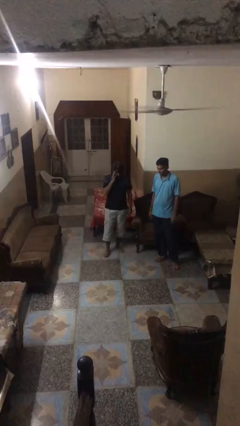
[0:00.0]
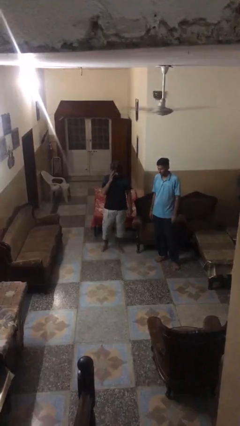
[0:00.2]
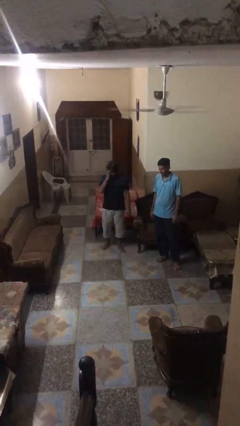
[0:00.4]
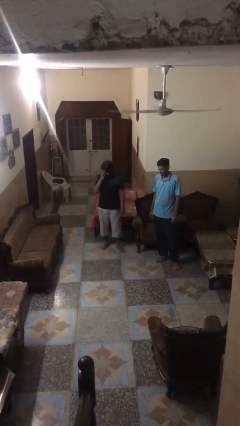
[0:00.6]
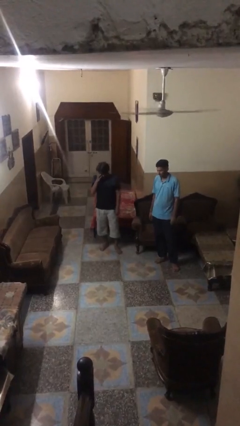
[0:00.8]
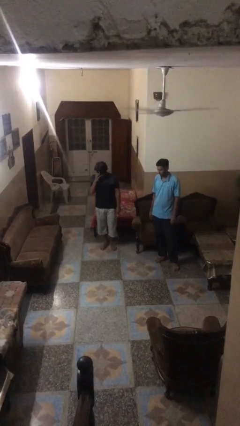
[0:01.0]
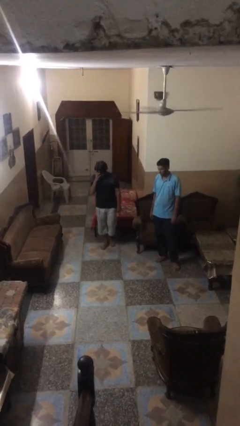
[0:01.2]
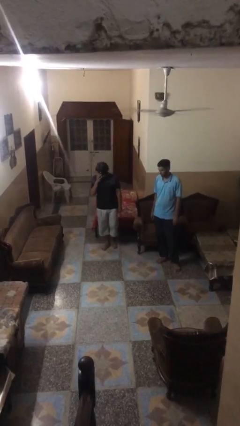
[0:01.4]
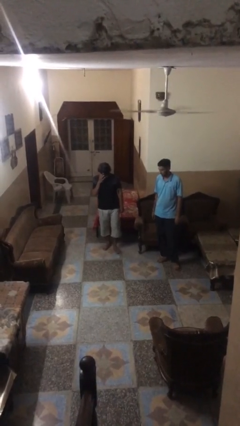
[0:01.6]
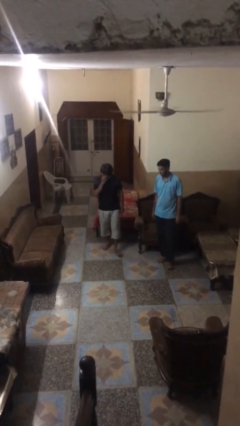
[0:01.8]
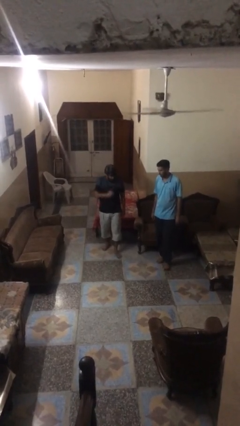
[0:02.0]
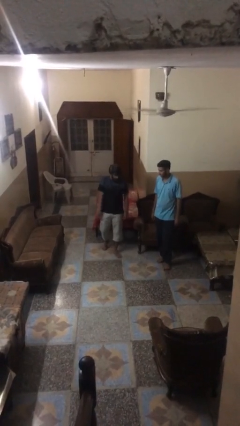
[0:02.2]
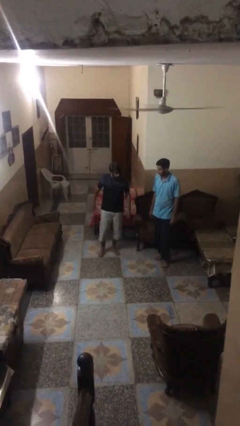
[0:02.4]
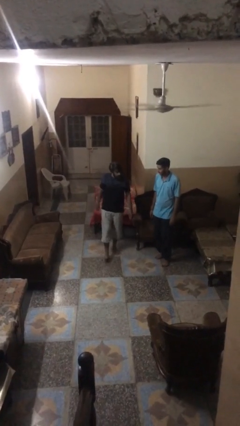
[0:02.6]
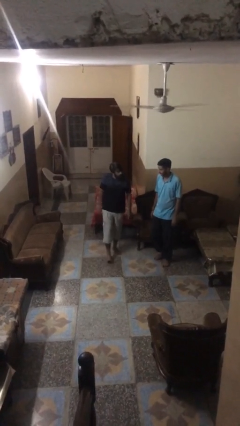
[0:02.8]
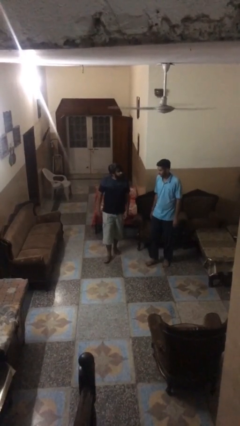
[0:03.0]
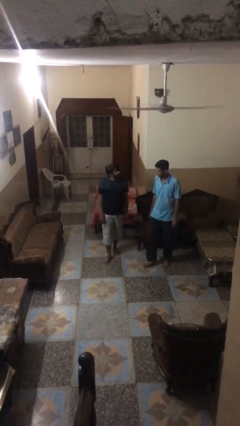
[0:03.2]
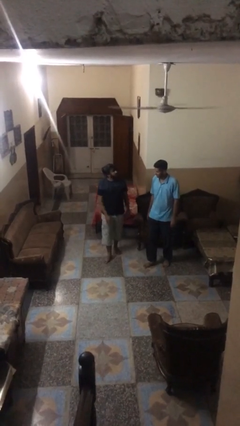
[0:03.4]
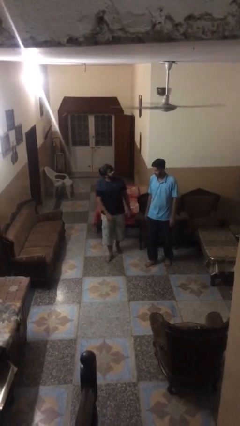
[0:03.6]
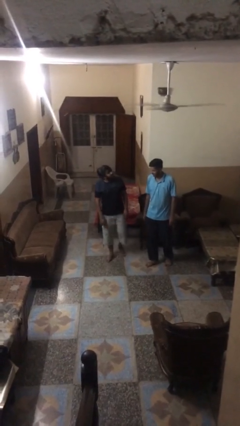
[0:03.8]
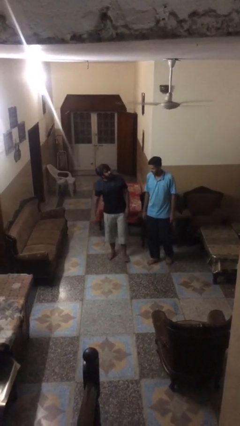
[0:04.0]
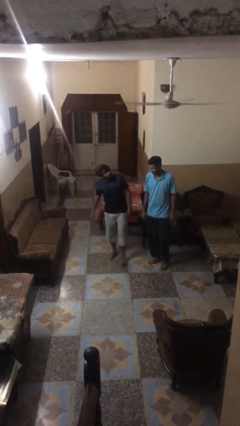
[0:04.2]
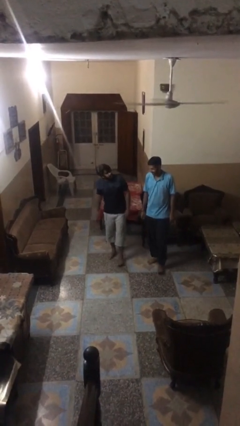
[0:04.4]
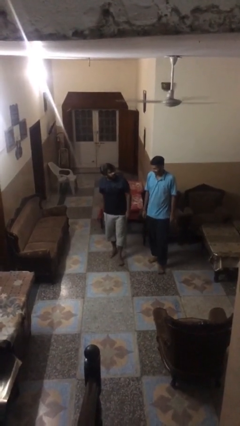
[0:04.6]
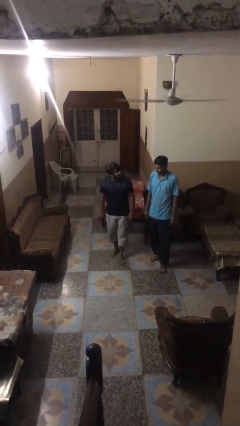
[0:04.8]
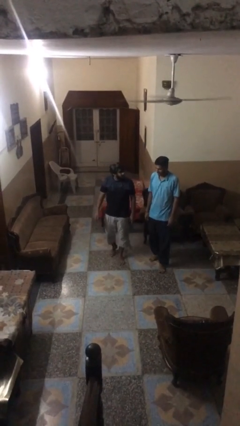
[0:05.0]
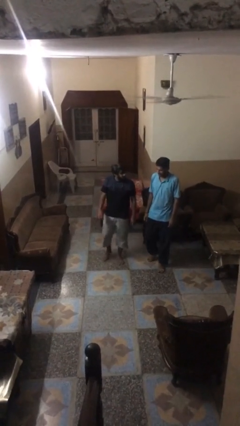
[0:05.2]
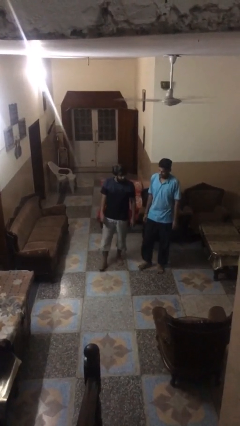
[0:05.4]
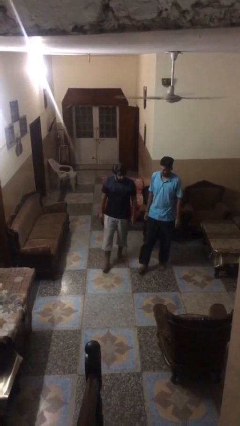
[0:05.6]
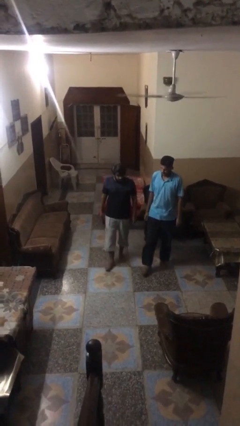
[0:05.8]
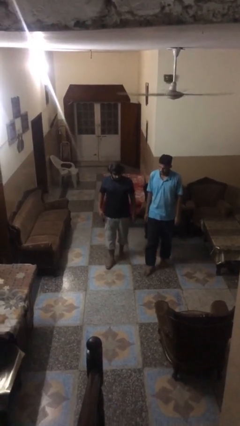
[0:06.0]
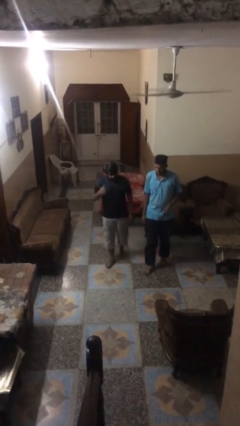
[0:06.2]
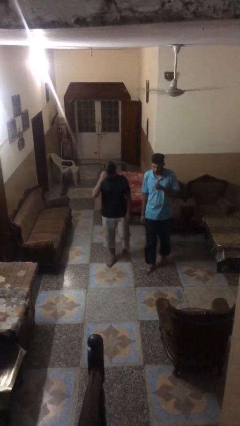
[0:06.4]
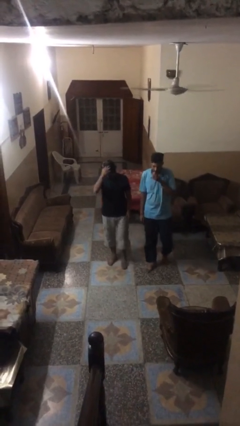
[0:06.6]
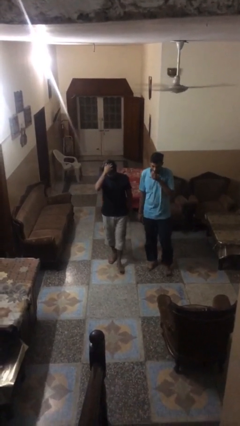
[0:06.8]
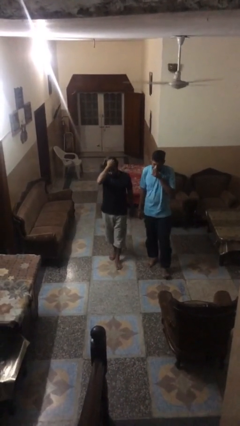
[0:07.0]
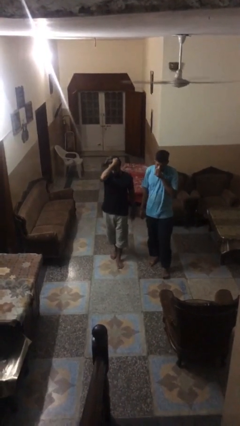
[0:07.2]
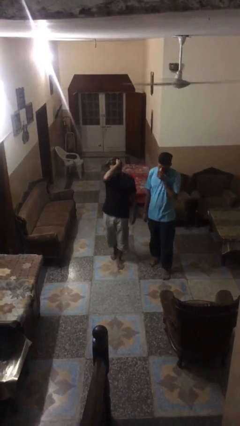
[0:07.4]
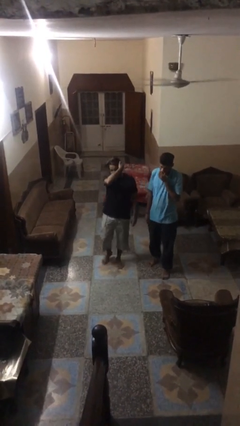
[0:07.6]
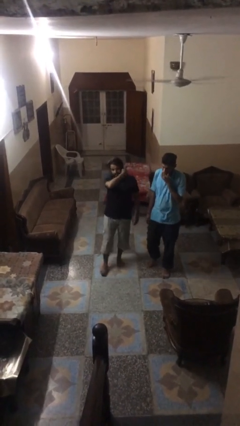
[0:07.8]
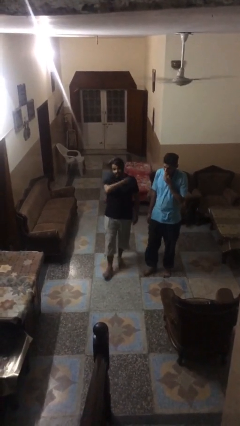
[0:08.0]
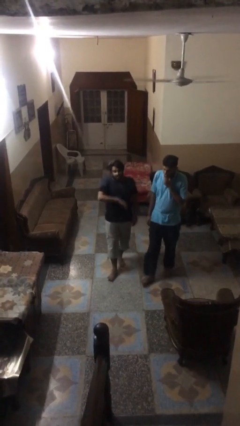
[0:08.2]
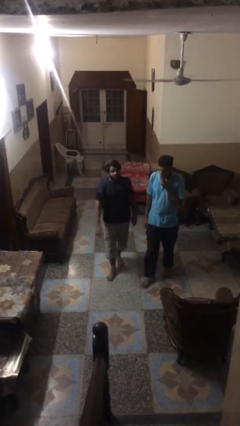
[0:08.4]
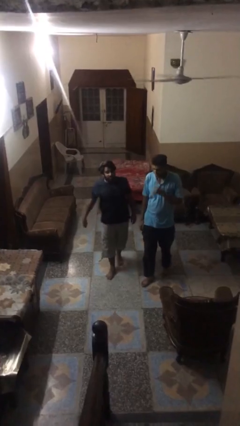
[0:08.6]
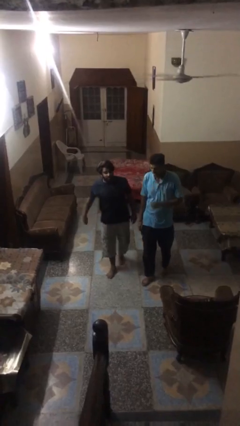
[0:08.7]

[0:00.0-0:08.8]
person talks to person

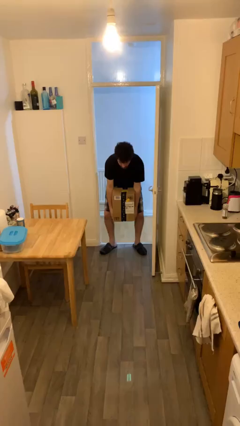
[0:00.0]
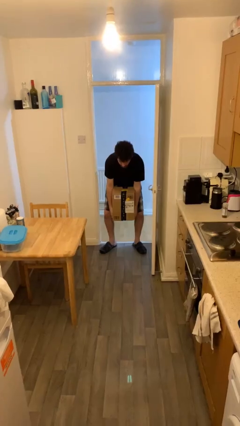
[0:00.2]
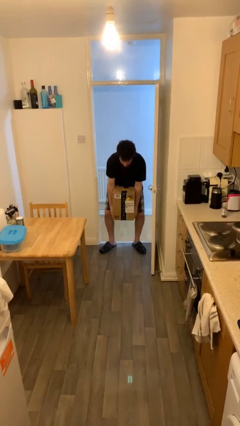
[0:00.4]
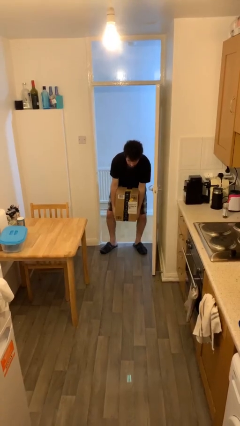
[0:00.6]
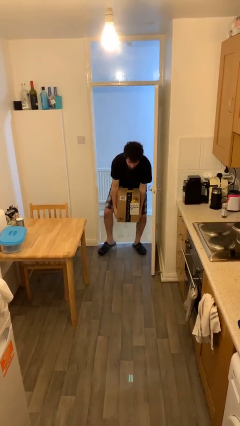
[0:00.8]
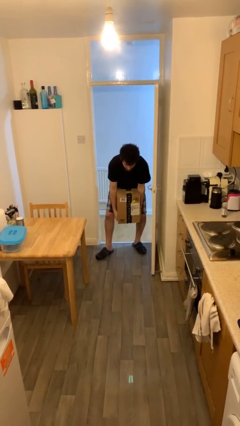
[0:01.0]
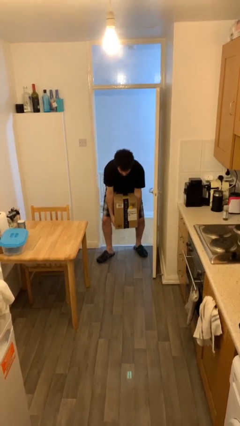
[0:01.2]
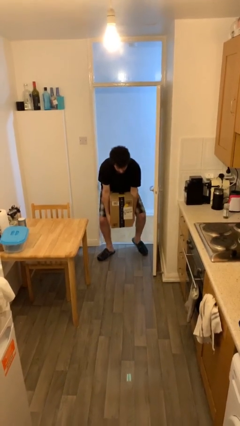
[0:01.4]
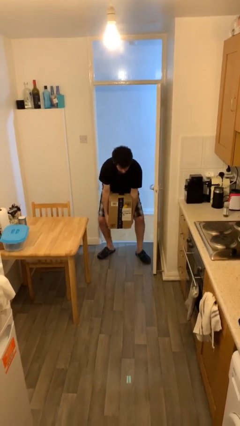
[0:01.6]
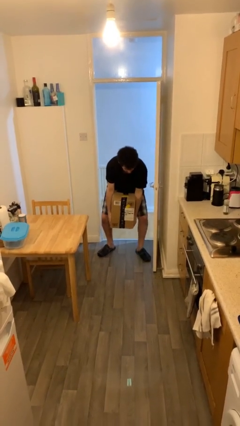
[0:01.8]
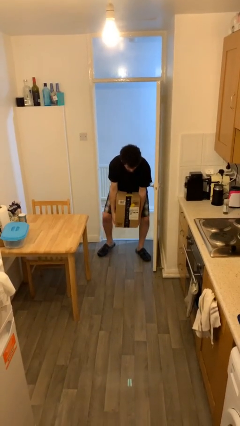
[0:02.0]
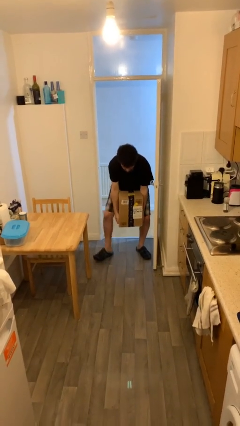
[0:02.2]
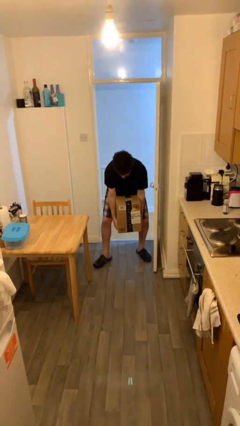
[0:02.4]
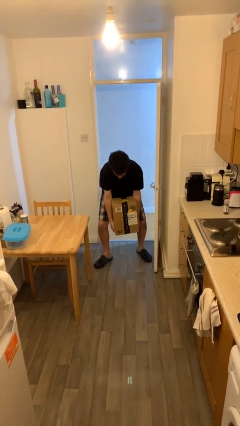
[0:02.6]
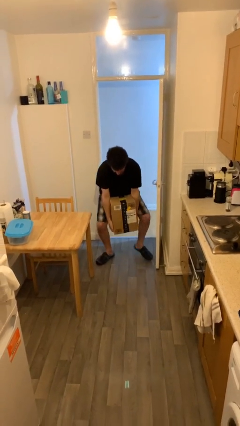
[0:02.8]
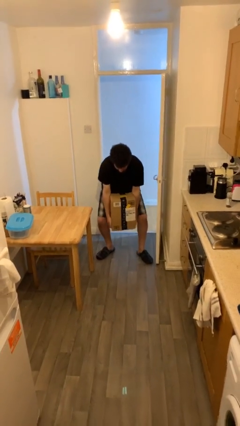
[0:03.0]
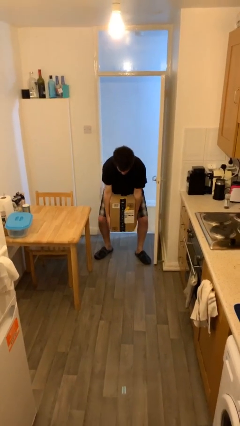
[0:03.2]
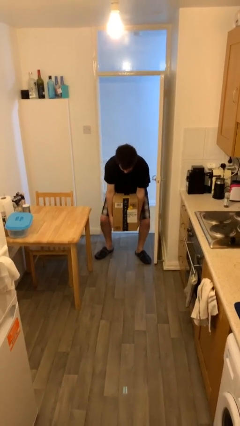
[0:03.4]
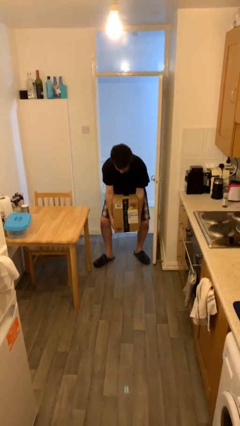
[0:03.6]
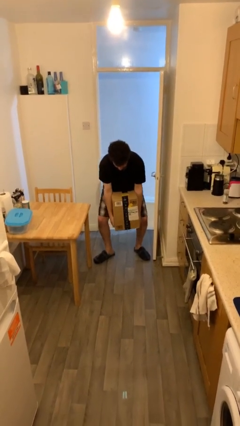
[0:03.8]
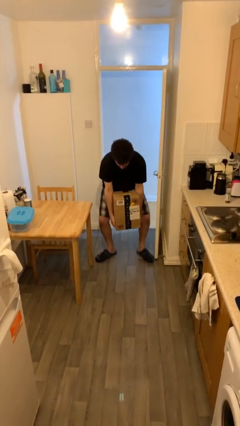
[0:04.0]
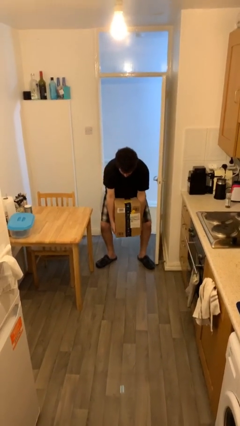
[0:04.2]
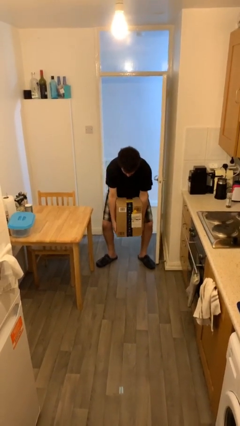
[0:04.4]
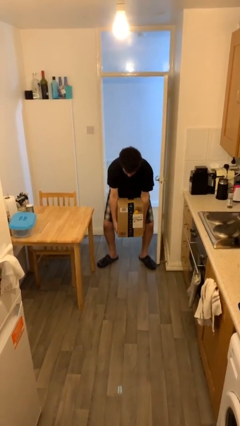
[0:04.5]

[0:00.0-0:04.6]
person carries heavy object

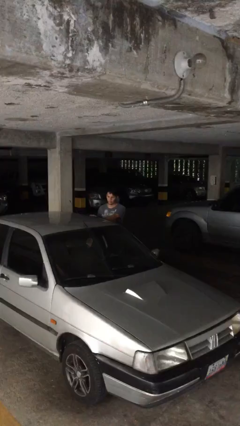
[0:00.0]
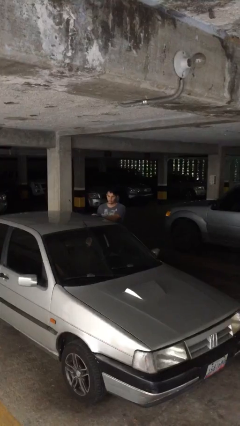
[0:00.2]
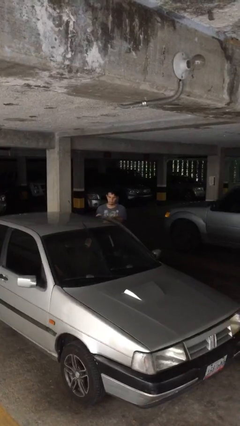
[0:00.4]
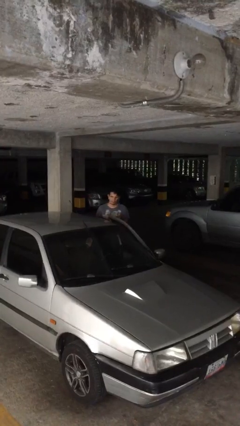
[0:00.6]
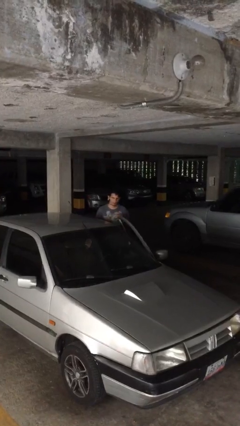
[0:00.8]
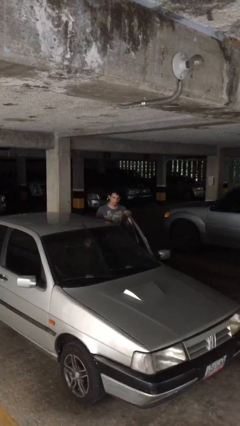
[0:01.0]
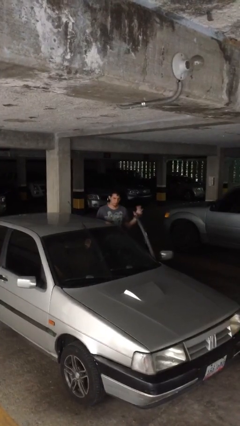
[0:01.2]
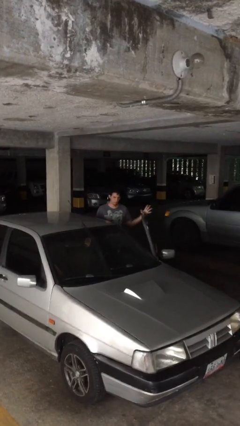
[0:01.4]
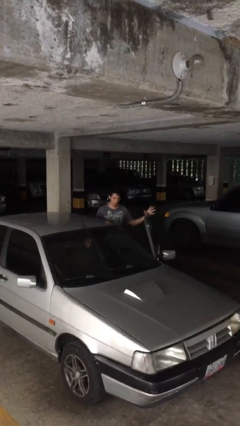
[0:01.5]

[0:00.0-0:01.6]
person opens car door

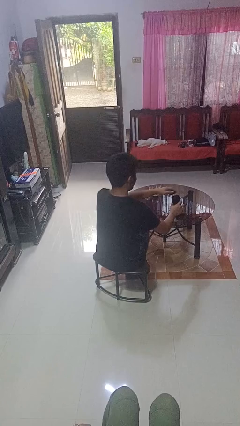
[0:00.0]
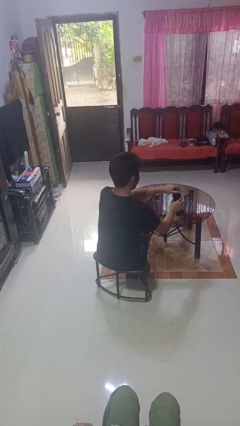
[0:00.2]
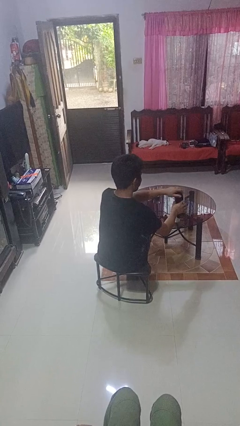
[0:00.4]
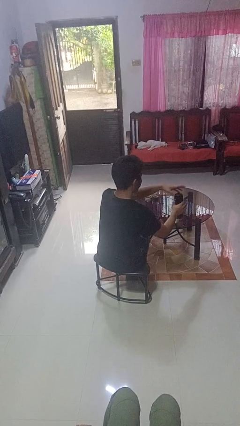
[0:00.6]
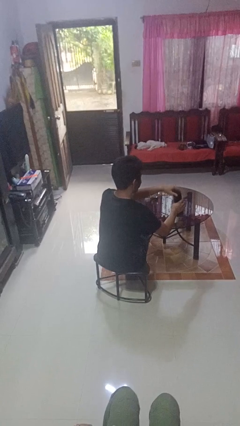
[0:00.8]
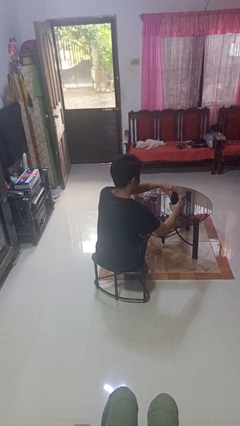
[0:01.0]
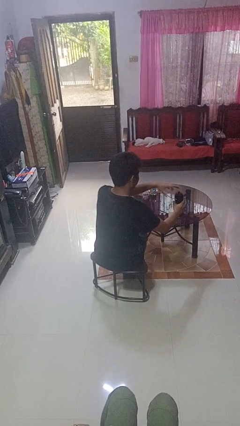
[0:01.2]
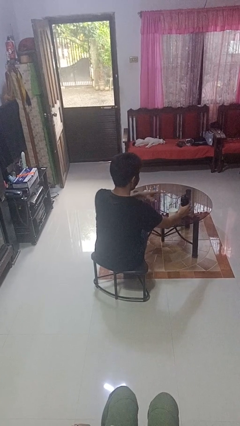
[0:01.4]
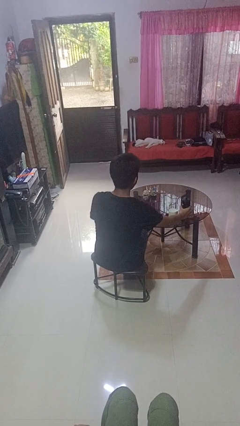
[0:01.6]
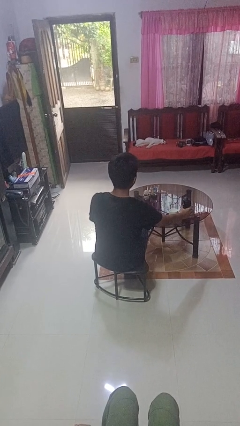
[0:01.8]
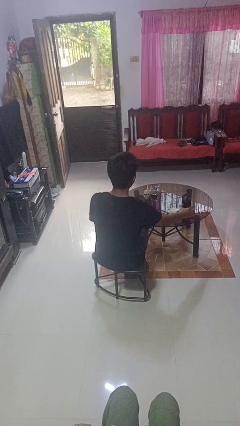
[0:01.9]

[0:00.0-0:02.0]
person screws lid to bottle

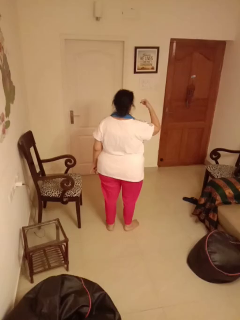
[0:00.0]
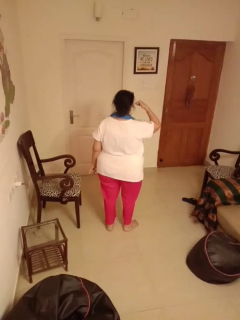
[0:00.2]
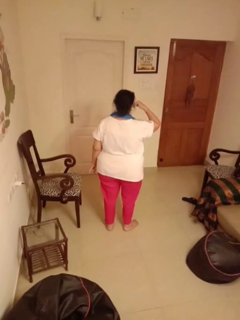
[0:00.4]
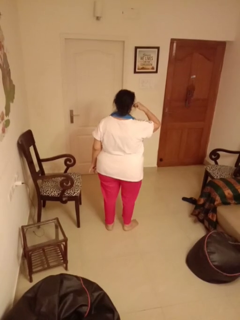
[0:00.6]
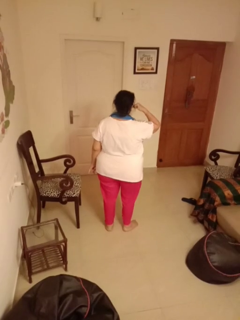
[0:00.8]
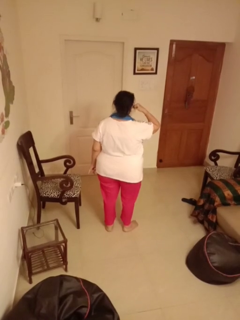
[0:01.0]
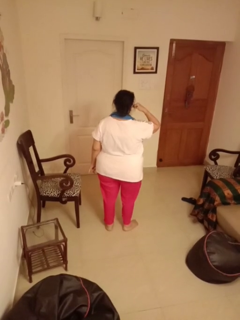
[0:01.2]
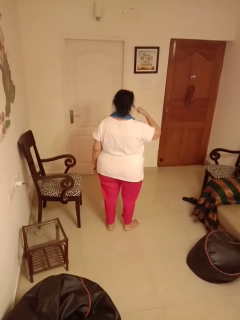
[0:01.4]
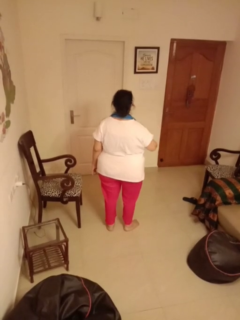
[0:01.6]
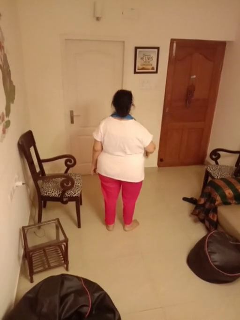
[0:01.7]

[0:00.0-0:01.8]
person gestures call me
